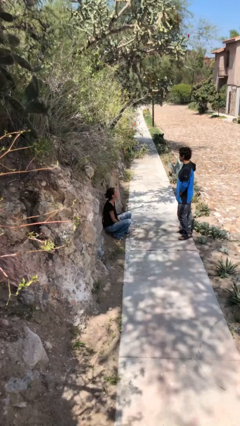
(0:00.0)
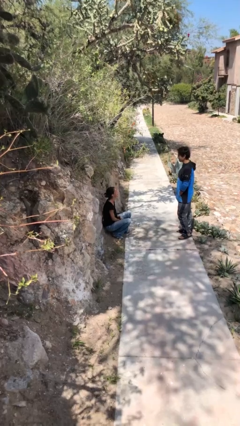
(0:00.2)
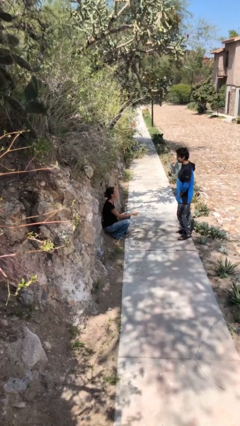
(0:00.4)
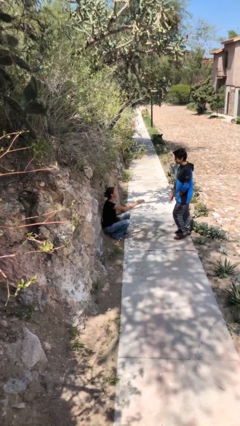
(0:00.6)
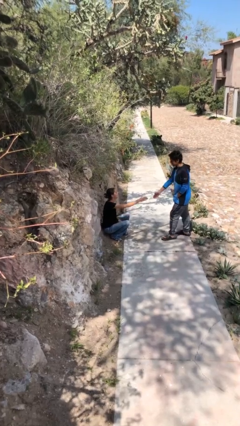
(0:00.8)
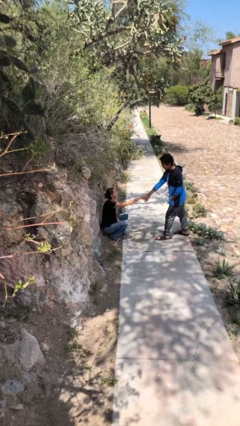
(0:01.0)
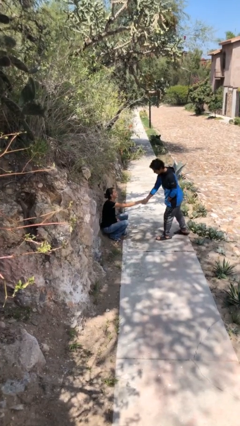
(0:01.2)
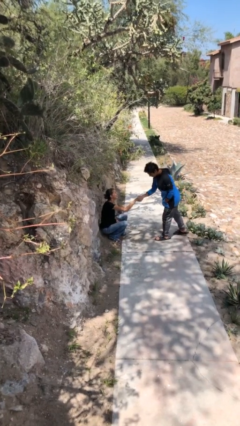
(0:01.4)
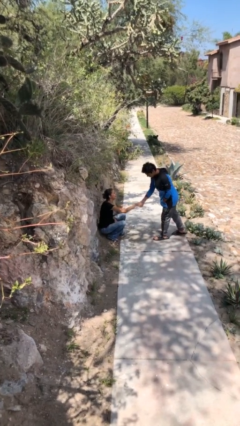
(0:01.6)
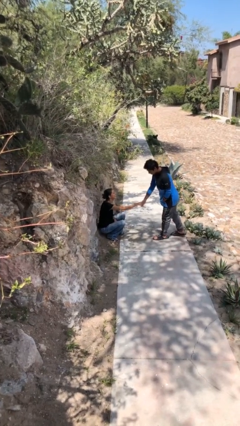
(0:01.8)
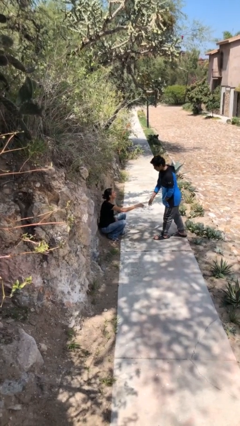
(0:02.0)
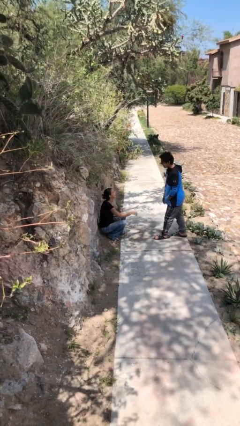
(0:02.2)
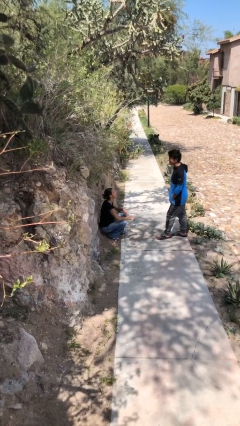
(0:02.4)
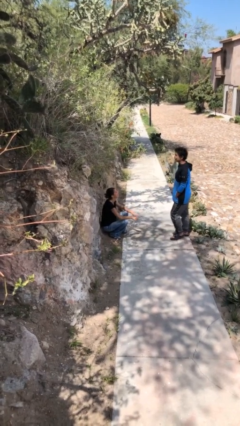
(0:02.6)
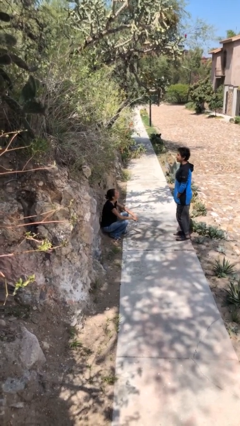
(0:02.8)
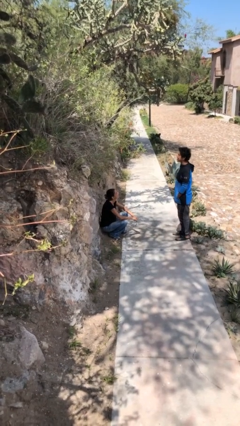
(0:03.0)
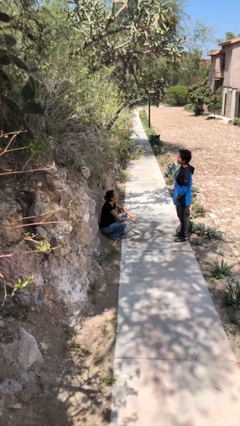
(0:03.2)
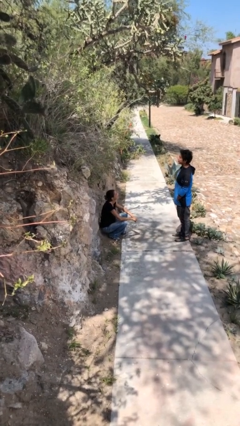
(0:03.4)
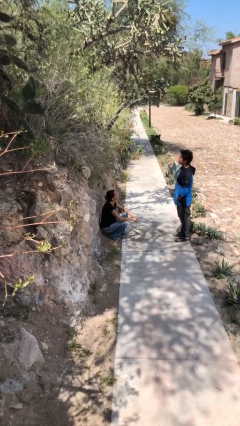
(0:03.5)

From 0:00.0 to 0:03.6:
person shakes hand

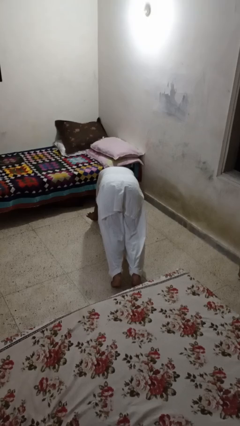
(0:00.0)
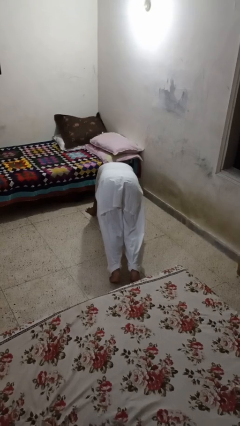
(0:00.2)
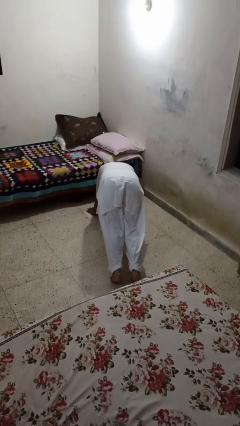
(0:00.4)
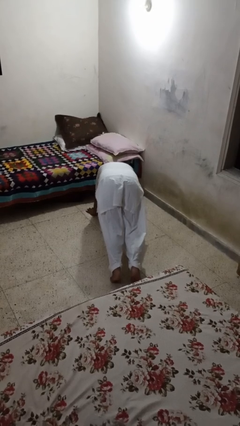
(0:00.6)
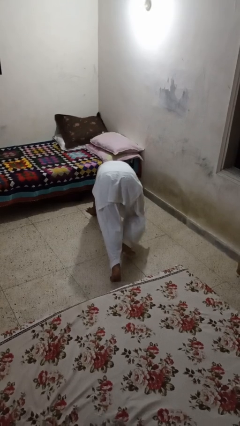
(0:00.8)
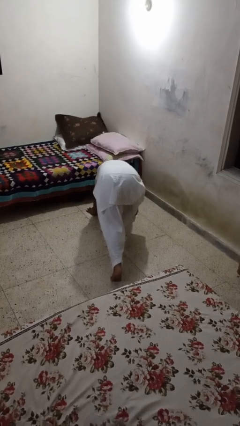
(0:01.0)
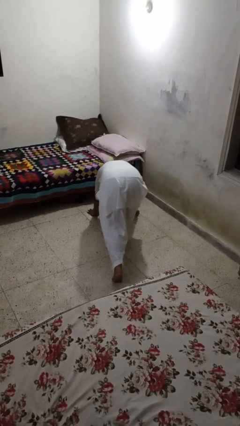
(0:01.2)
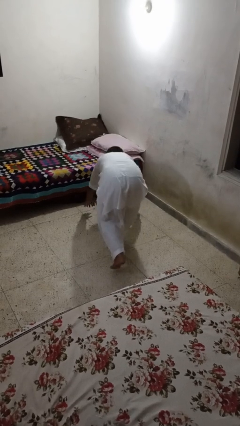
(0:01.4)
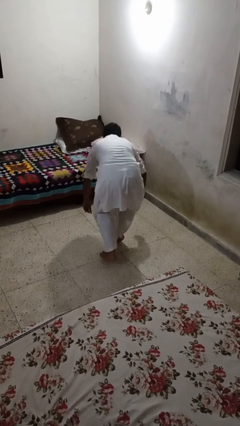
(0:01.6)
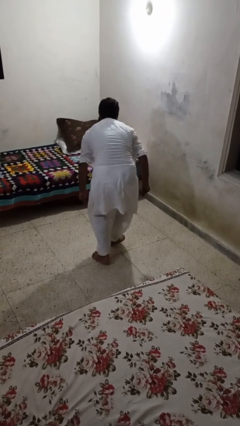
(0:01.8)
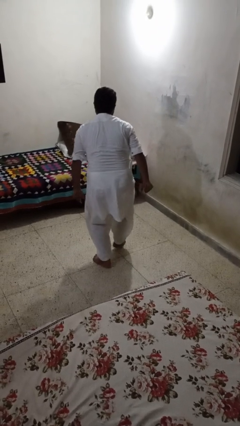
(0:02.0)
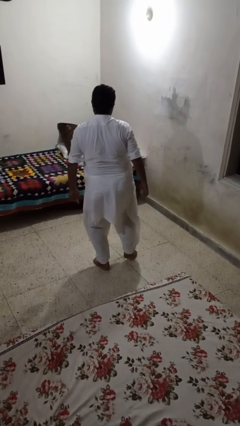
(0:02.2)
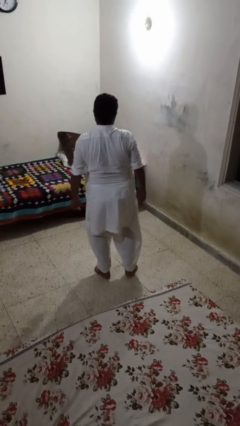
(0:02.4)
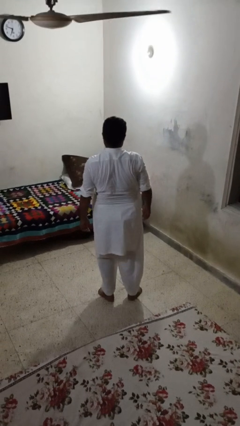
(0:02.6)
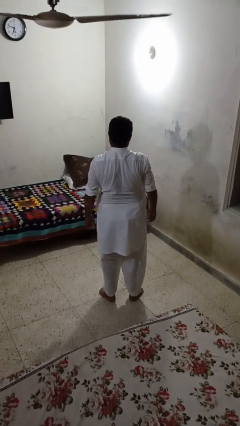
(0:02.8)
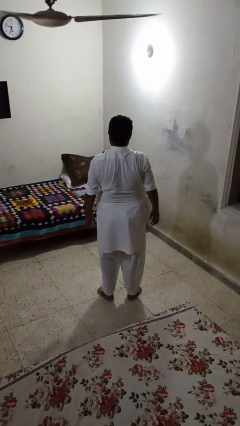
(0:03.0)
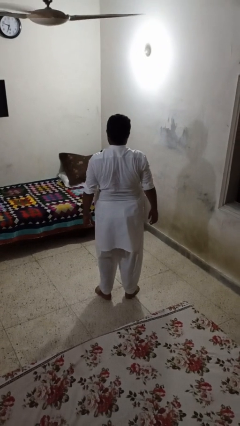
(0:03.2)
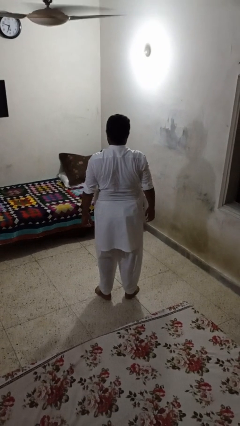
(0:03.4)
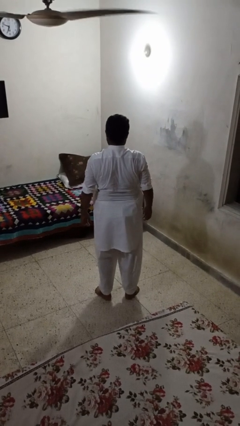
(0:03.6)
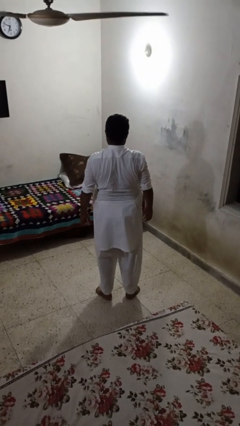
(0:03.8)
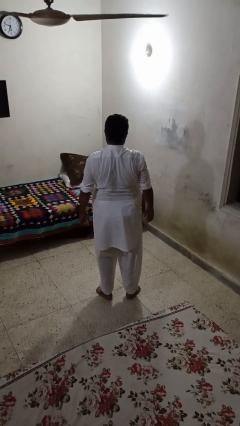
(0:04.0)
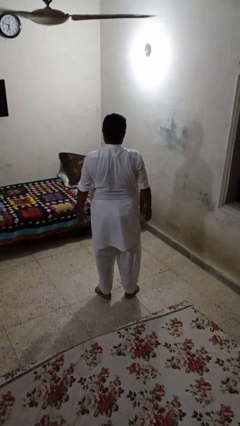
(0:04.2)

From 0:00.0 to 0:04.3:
person stands up from floor

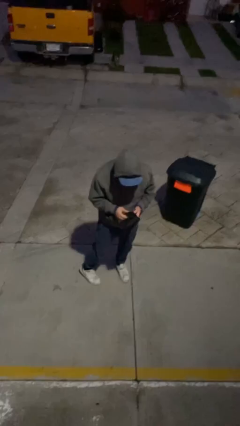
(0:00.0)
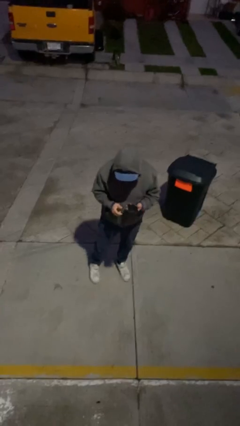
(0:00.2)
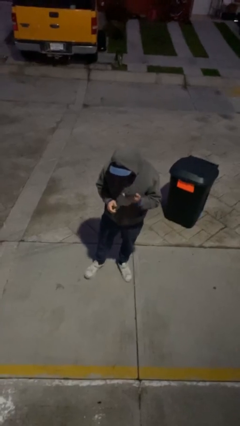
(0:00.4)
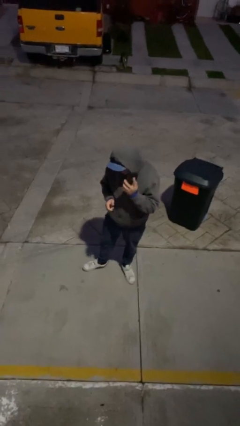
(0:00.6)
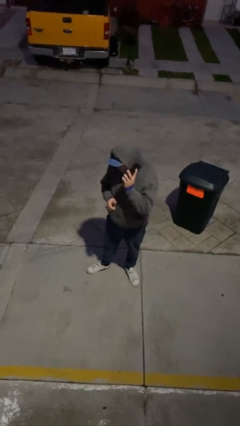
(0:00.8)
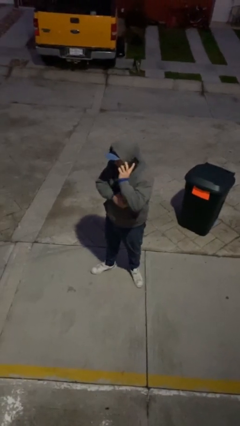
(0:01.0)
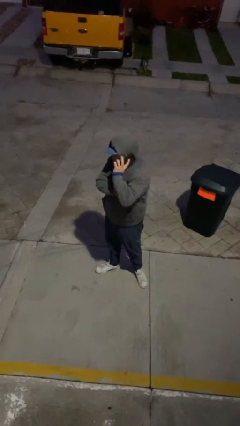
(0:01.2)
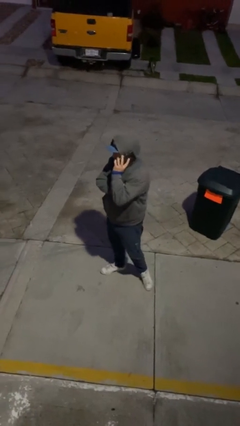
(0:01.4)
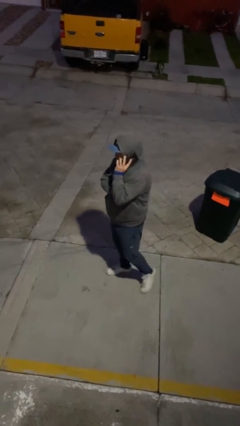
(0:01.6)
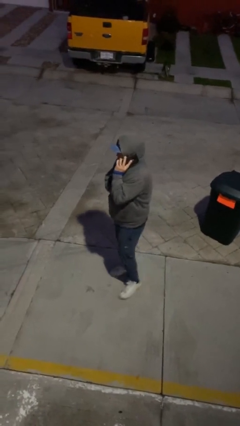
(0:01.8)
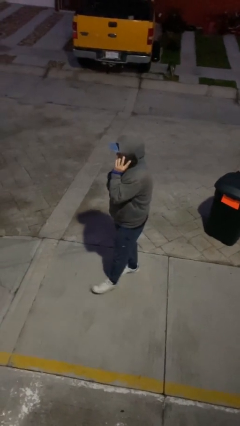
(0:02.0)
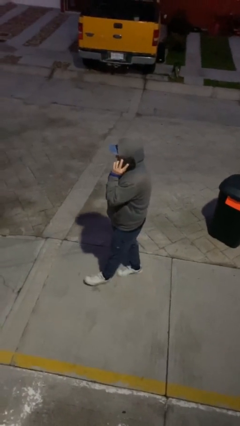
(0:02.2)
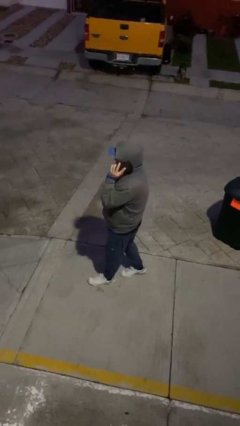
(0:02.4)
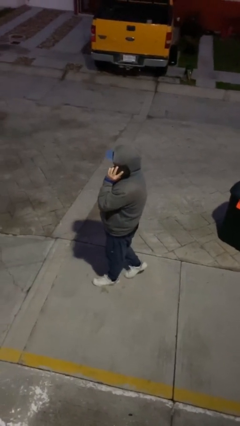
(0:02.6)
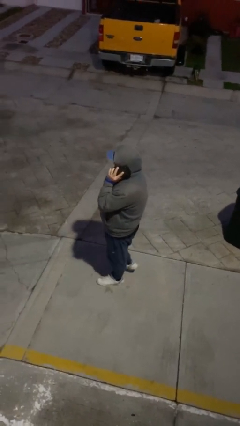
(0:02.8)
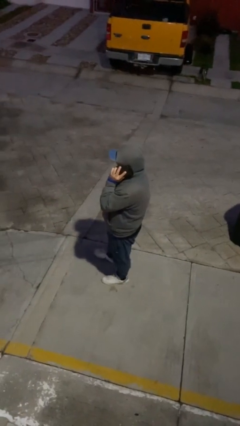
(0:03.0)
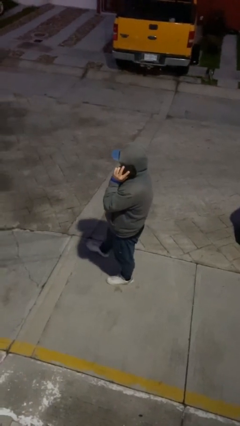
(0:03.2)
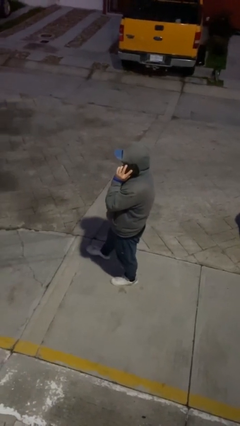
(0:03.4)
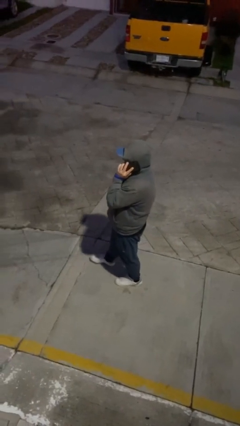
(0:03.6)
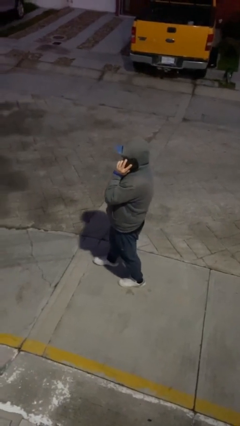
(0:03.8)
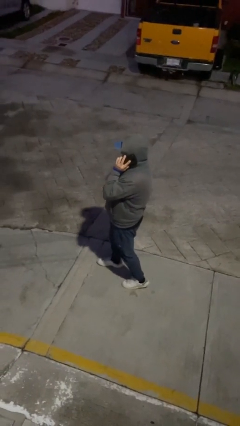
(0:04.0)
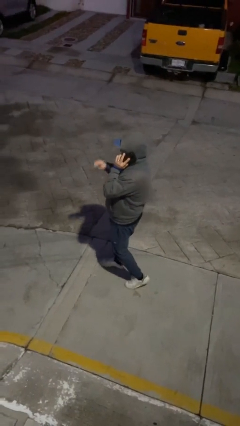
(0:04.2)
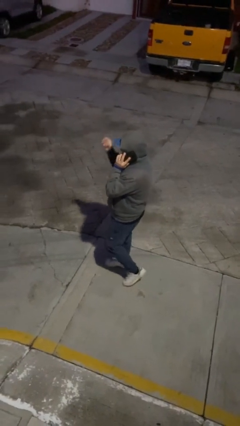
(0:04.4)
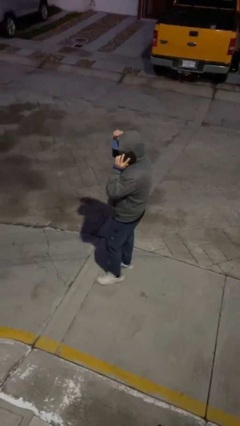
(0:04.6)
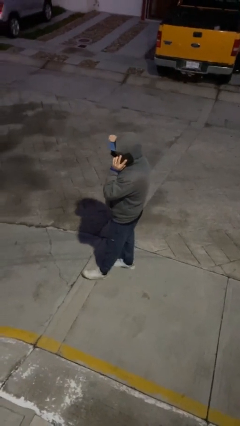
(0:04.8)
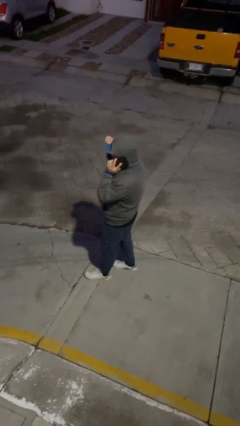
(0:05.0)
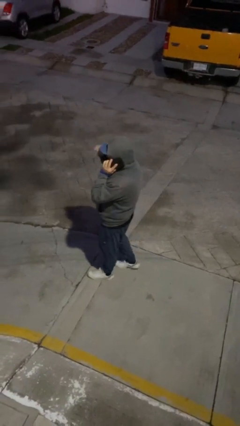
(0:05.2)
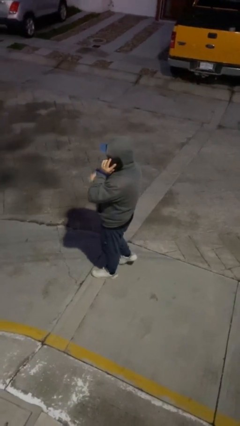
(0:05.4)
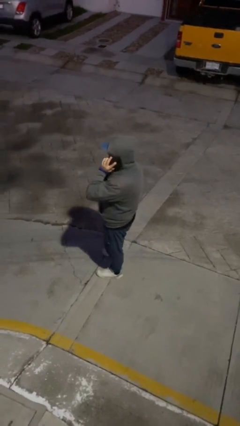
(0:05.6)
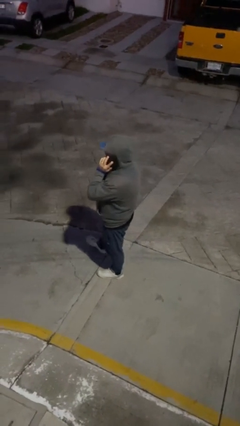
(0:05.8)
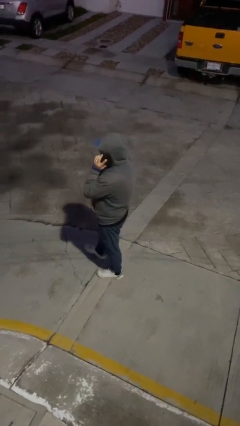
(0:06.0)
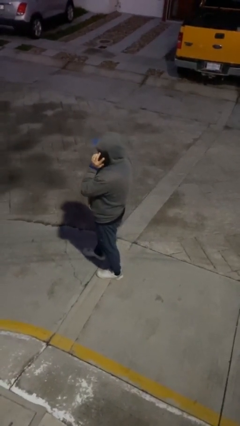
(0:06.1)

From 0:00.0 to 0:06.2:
person talks on phone

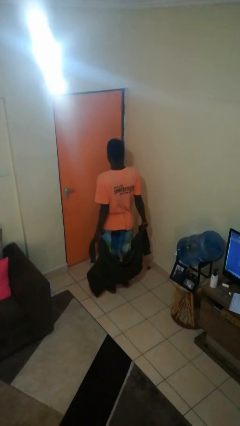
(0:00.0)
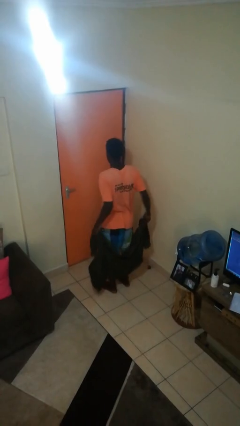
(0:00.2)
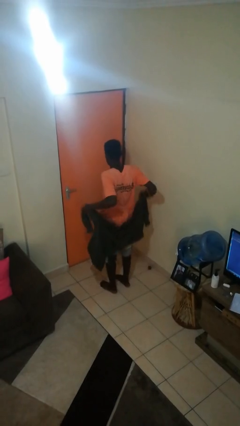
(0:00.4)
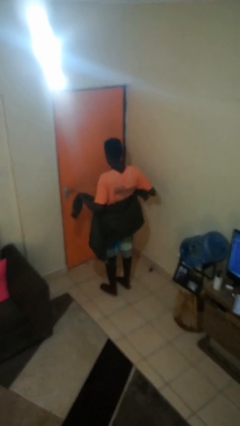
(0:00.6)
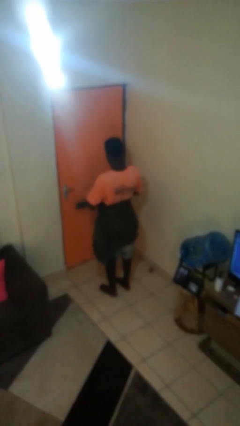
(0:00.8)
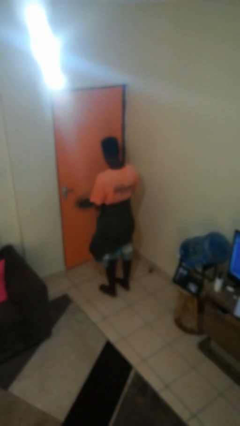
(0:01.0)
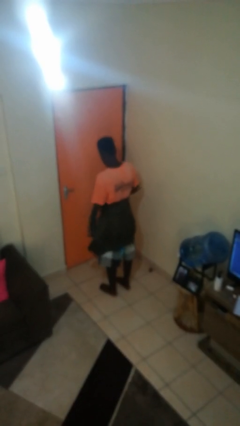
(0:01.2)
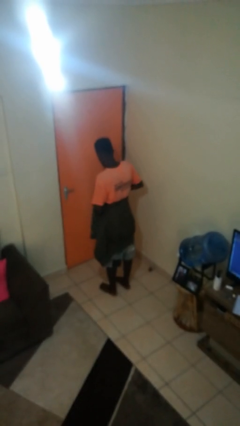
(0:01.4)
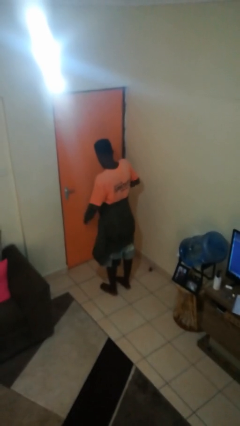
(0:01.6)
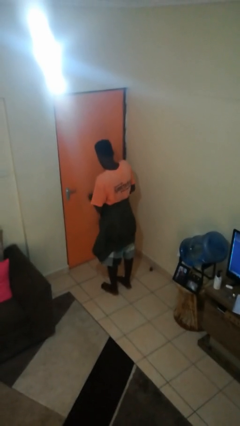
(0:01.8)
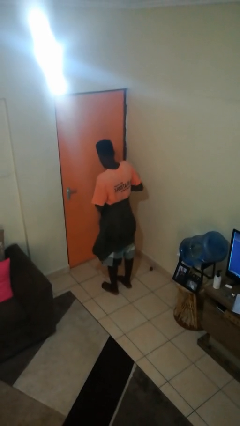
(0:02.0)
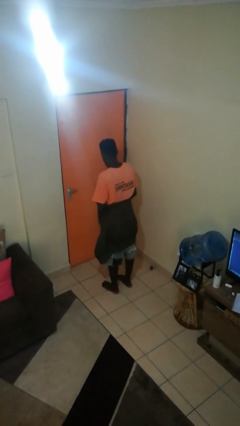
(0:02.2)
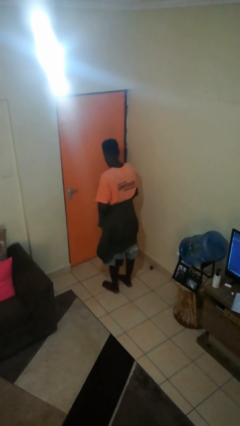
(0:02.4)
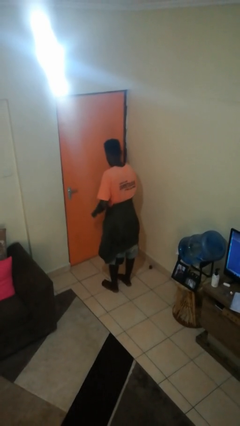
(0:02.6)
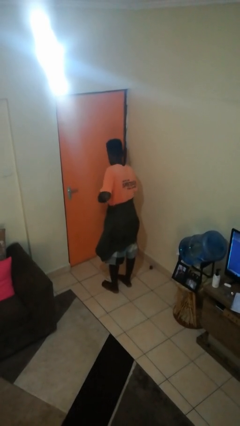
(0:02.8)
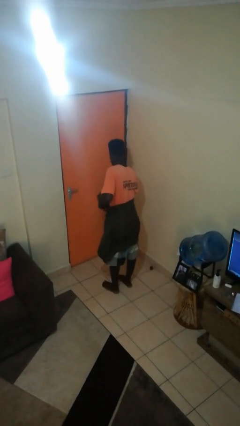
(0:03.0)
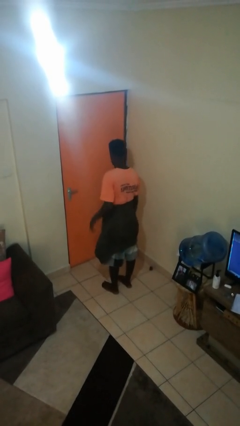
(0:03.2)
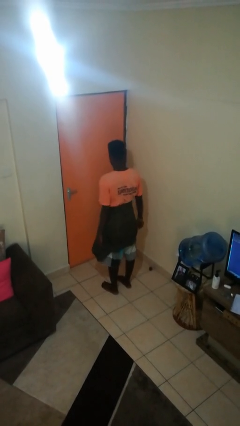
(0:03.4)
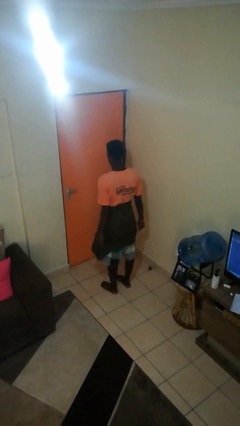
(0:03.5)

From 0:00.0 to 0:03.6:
person ties jacket around waist

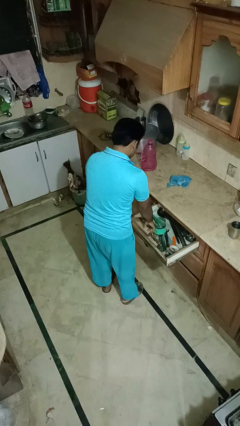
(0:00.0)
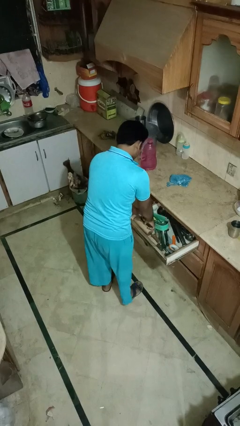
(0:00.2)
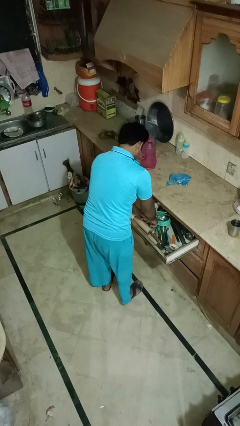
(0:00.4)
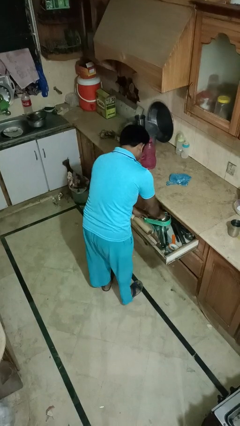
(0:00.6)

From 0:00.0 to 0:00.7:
person searches in kitchen drawer
